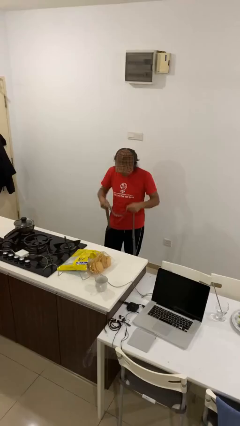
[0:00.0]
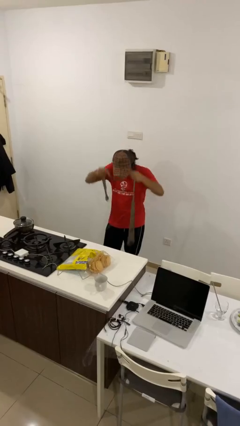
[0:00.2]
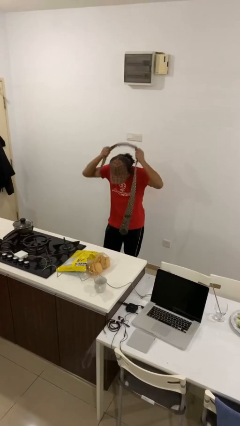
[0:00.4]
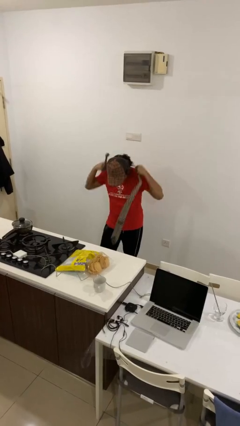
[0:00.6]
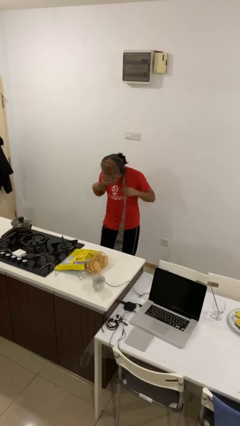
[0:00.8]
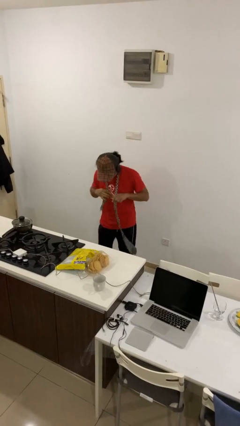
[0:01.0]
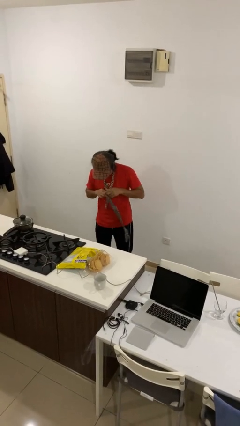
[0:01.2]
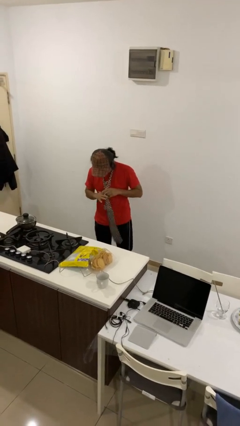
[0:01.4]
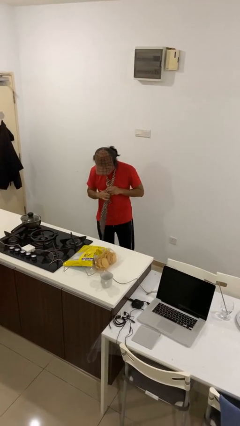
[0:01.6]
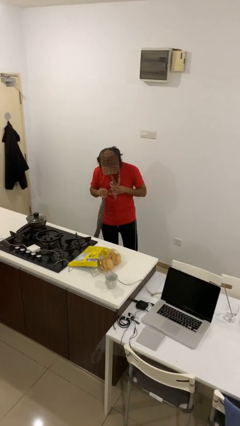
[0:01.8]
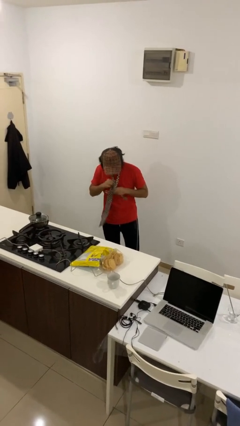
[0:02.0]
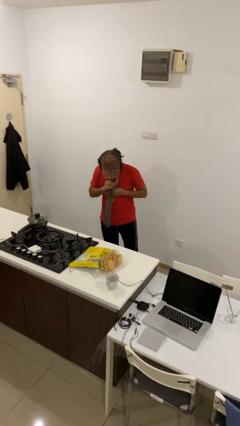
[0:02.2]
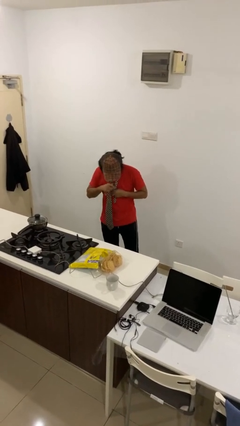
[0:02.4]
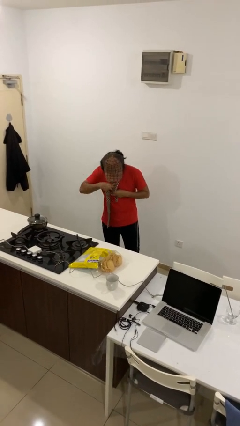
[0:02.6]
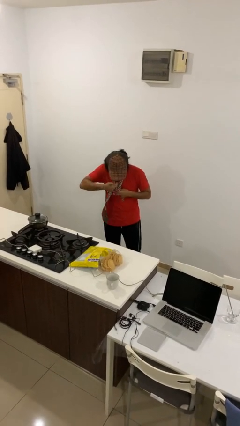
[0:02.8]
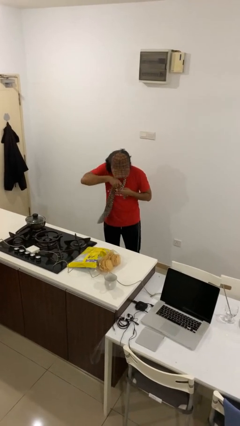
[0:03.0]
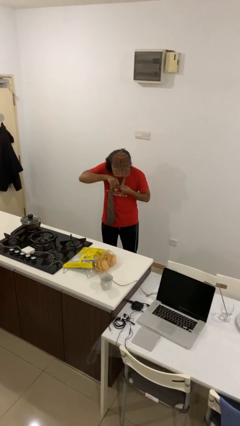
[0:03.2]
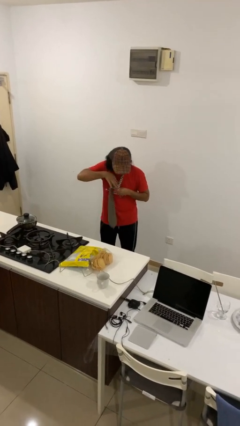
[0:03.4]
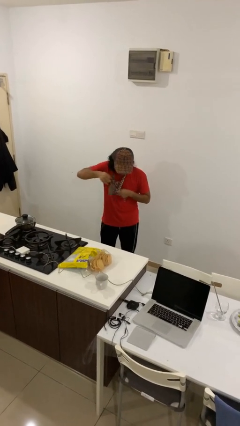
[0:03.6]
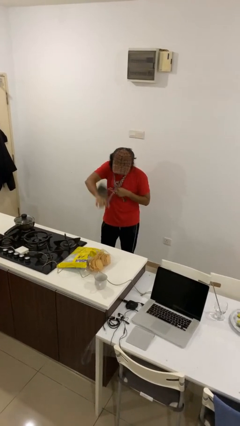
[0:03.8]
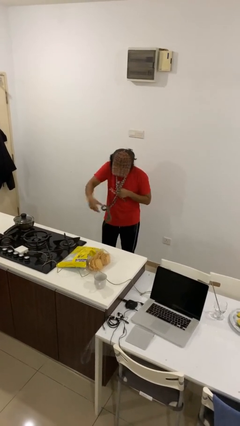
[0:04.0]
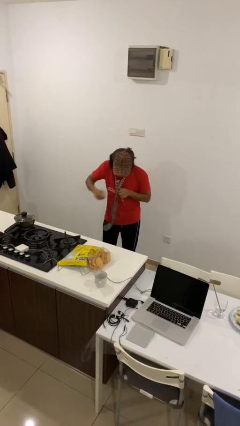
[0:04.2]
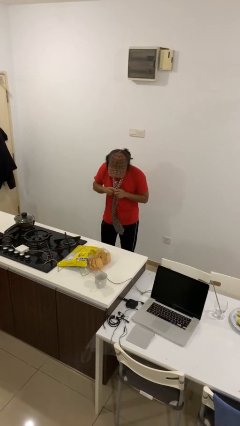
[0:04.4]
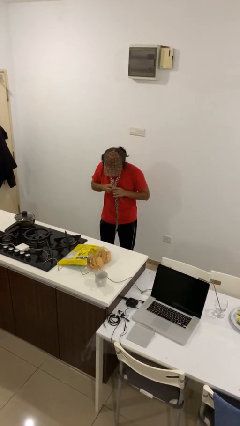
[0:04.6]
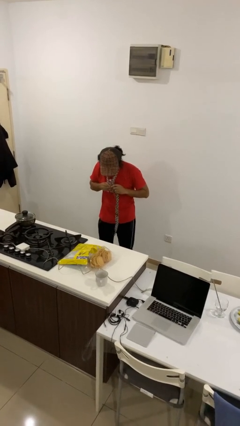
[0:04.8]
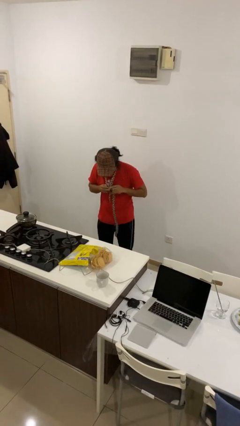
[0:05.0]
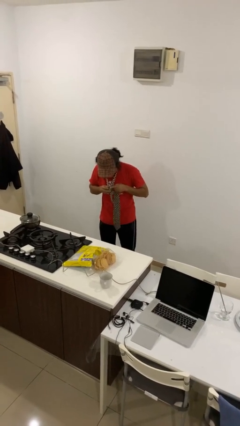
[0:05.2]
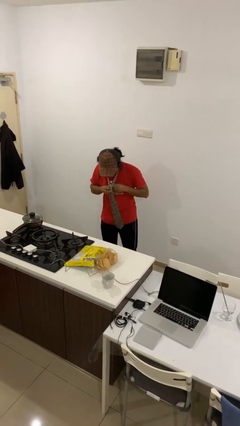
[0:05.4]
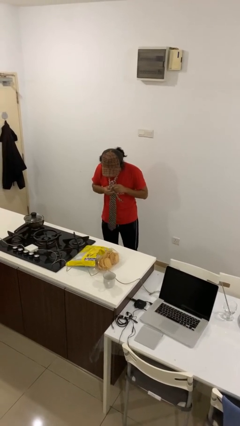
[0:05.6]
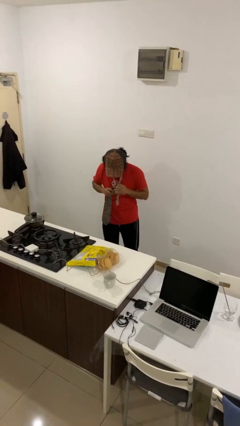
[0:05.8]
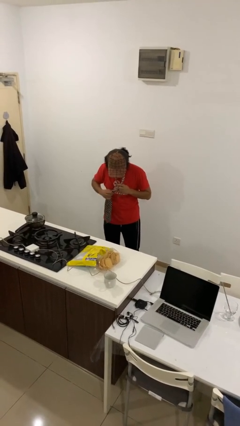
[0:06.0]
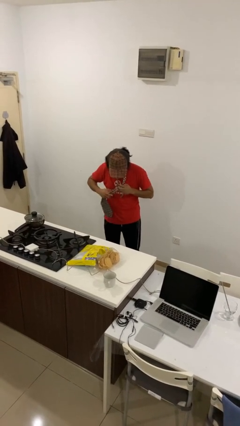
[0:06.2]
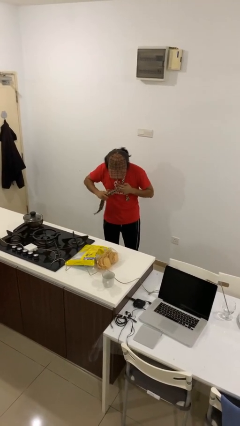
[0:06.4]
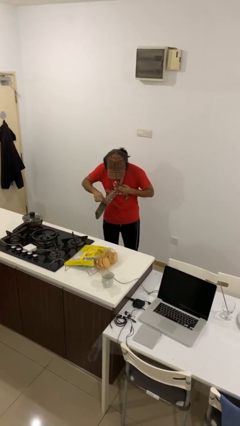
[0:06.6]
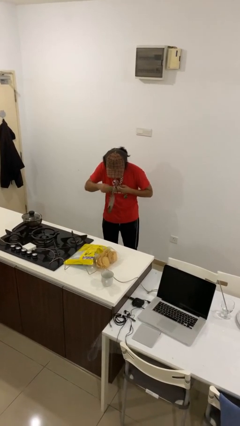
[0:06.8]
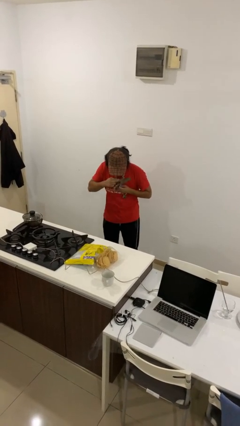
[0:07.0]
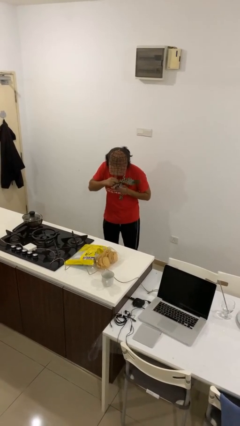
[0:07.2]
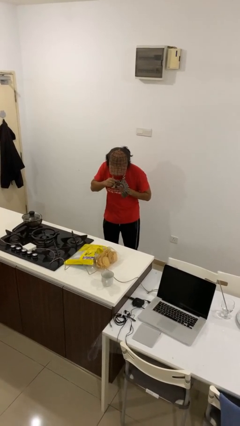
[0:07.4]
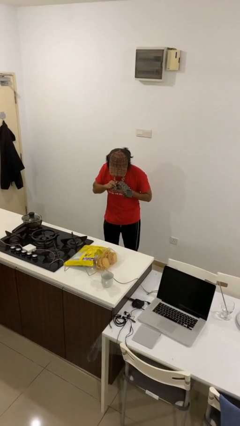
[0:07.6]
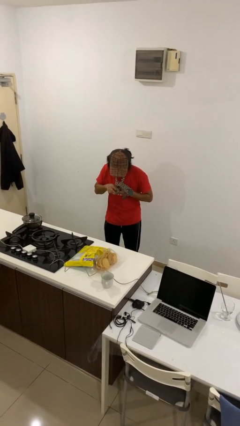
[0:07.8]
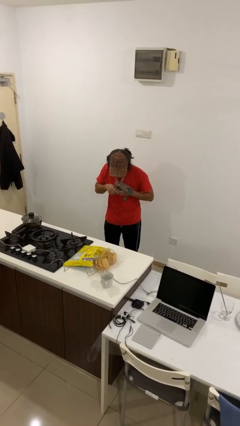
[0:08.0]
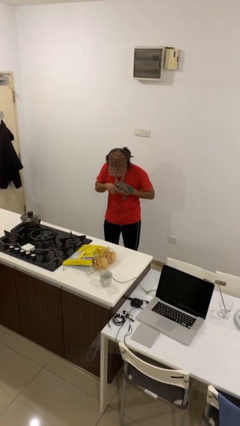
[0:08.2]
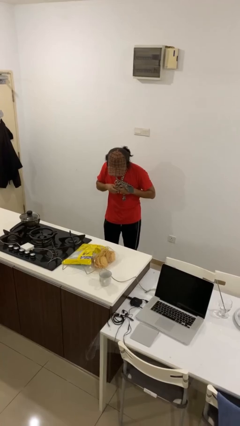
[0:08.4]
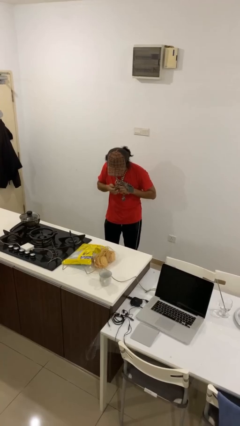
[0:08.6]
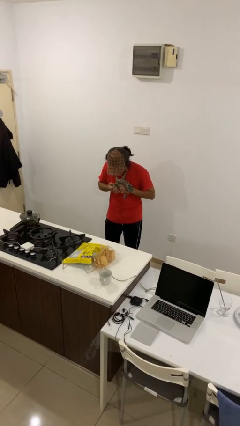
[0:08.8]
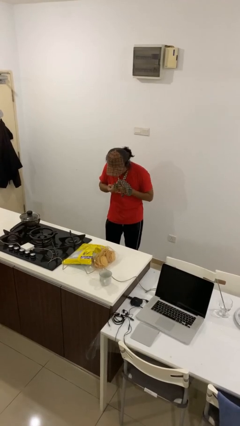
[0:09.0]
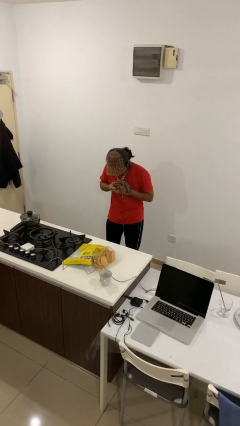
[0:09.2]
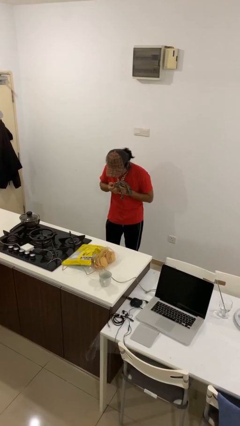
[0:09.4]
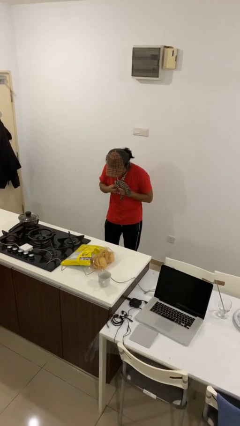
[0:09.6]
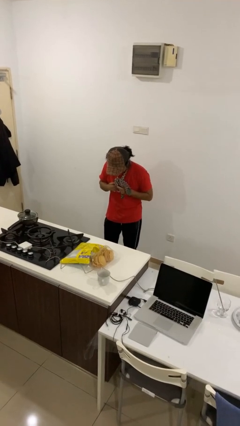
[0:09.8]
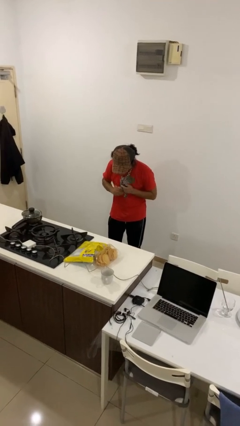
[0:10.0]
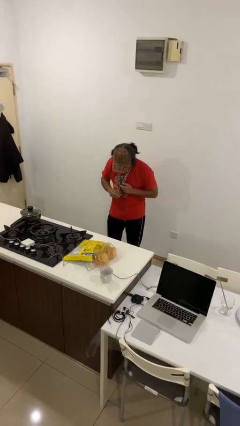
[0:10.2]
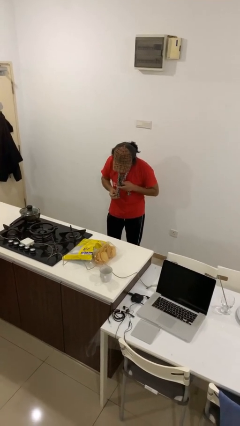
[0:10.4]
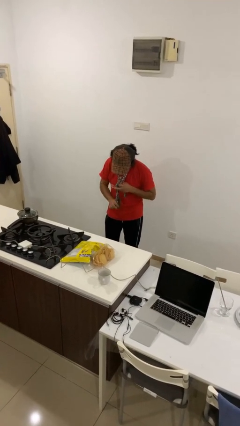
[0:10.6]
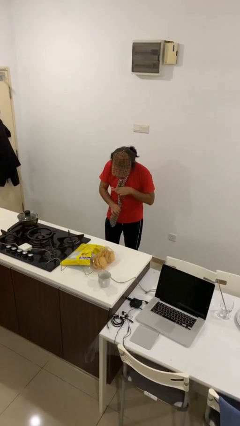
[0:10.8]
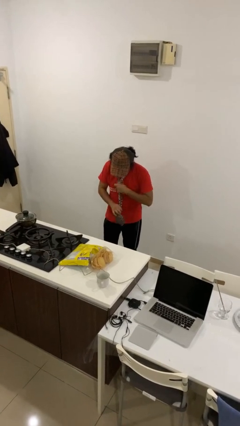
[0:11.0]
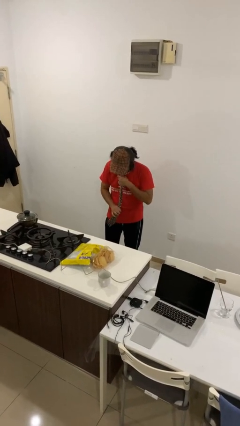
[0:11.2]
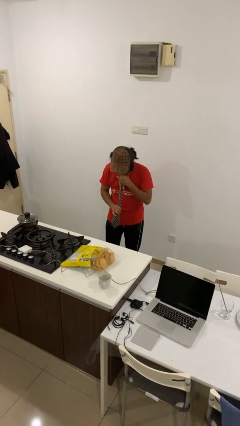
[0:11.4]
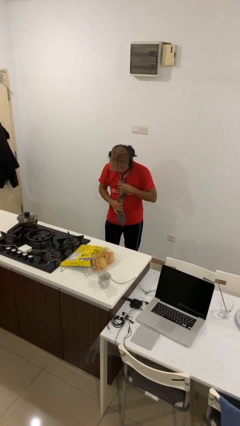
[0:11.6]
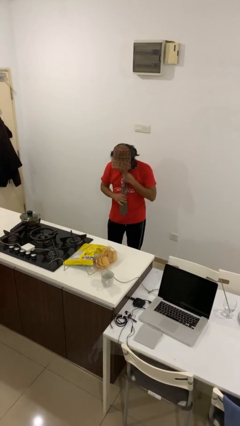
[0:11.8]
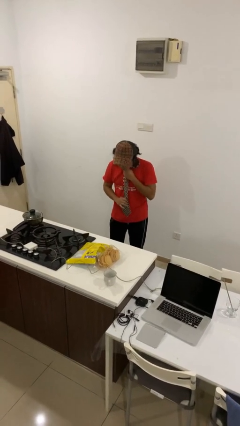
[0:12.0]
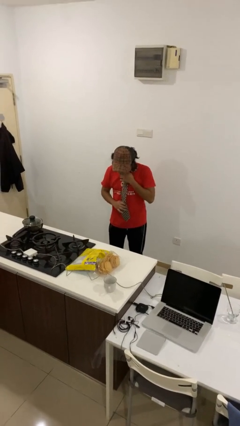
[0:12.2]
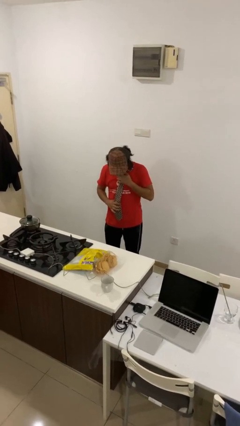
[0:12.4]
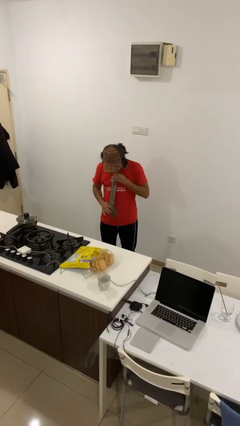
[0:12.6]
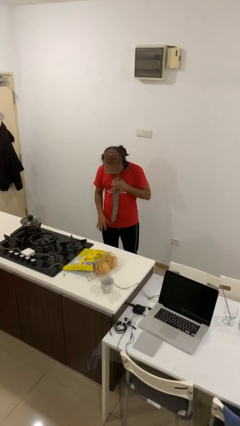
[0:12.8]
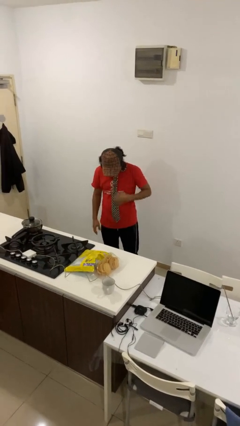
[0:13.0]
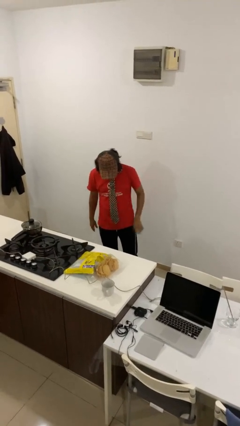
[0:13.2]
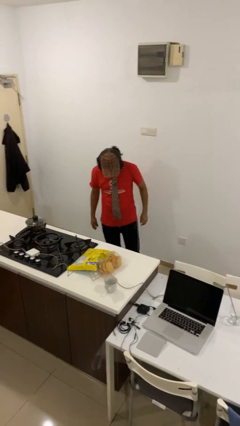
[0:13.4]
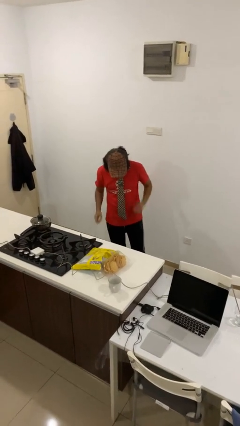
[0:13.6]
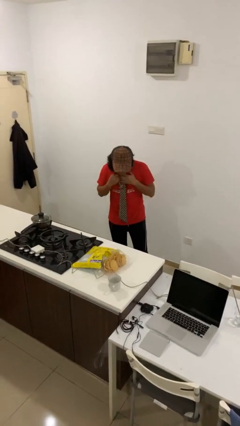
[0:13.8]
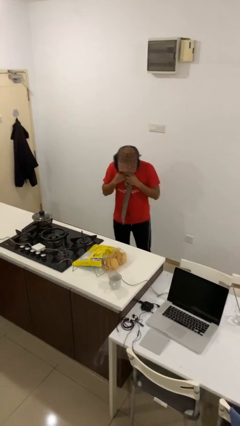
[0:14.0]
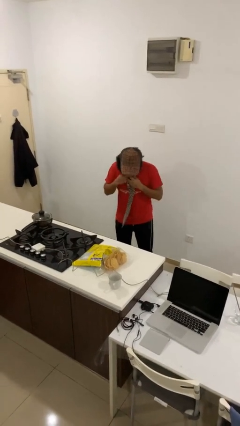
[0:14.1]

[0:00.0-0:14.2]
person puts on necktie

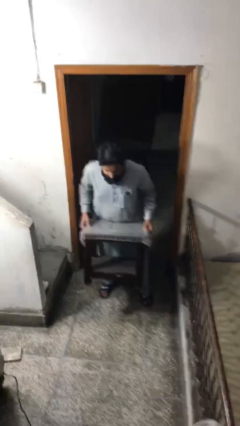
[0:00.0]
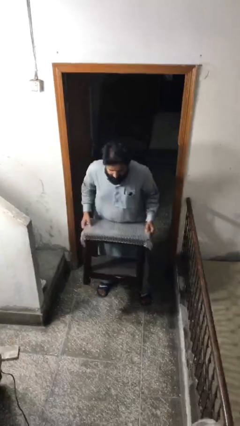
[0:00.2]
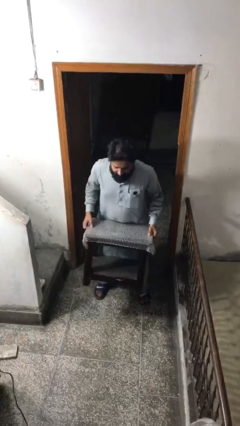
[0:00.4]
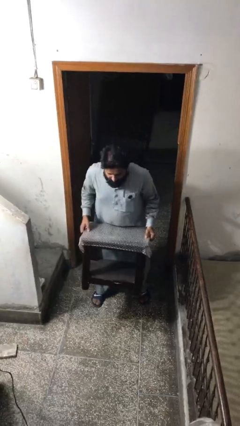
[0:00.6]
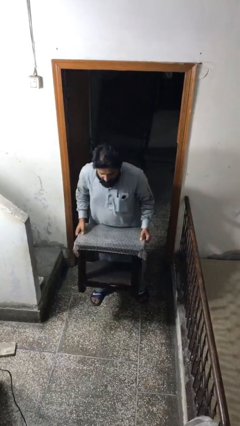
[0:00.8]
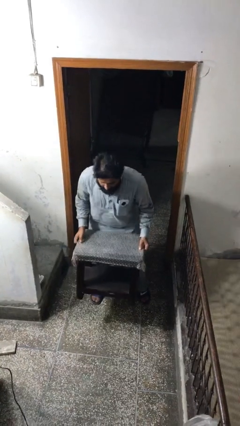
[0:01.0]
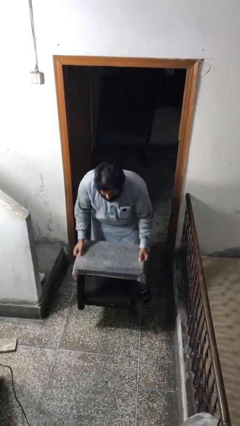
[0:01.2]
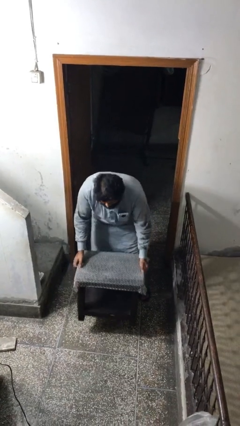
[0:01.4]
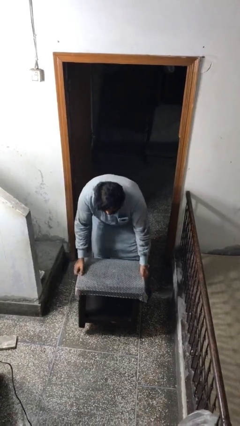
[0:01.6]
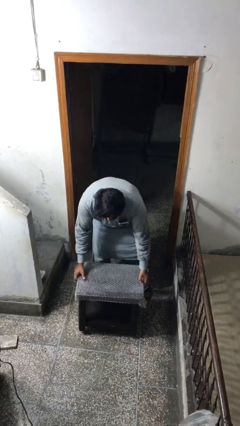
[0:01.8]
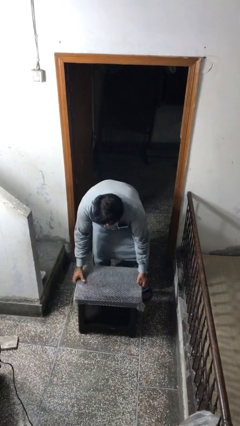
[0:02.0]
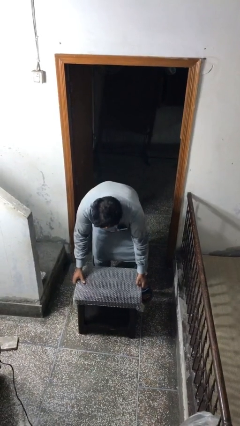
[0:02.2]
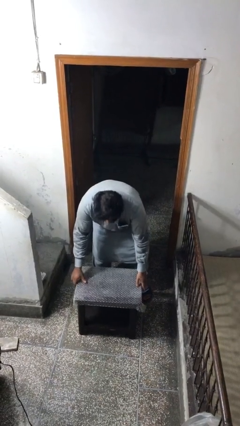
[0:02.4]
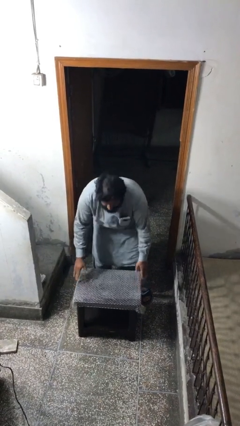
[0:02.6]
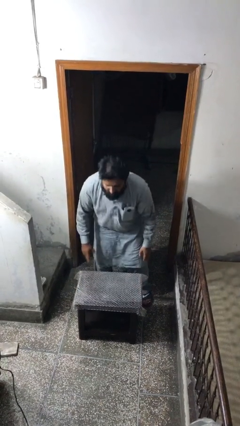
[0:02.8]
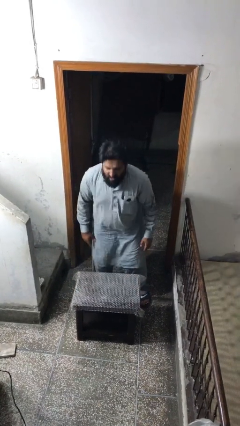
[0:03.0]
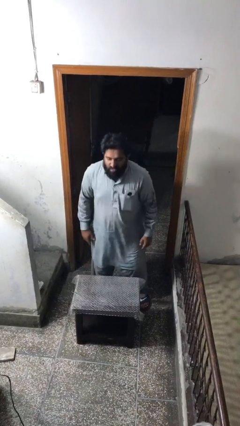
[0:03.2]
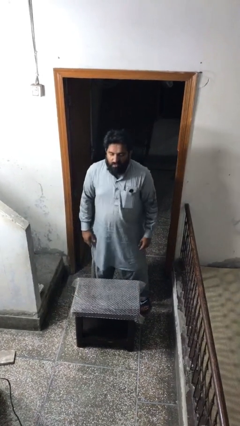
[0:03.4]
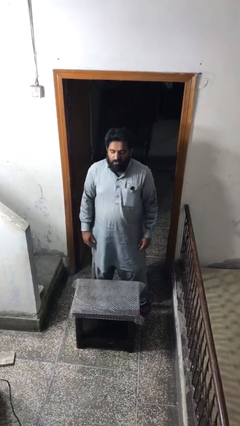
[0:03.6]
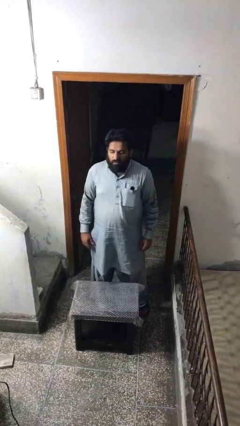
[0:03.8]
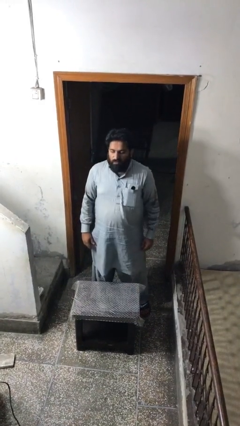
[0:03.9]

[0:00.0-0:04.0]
person puts down object on floor

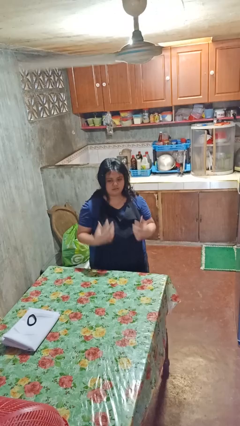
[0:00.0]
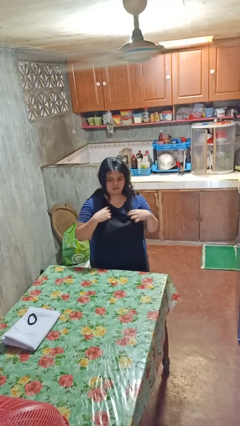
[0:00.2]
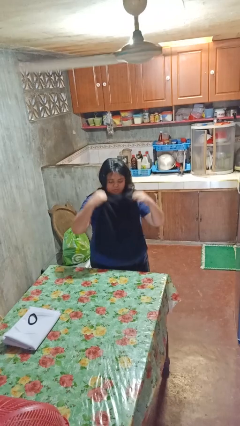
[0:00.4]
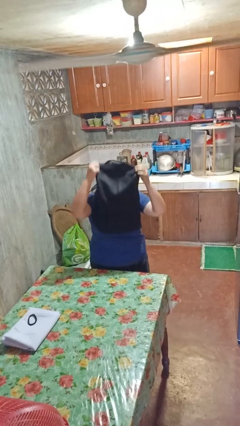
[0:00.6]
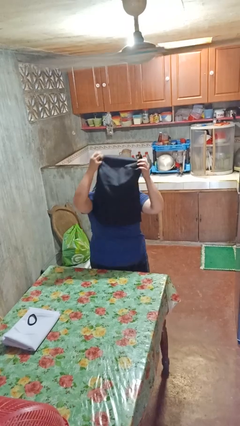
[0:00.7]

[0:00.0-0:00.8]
person takes off apron
